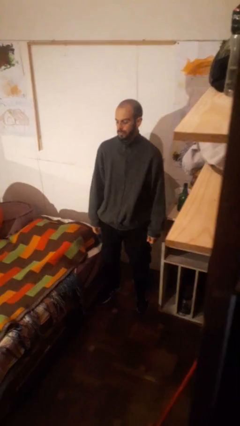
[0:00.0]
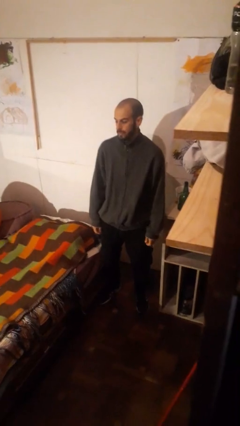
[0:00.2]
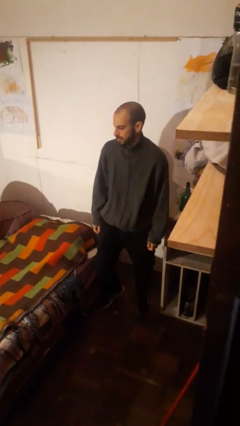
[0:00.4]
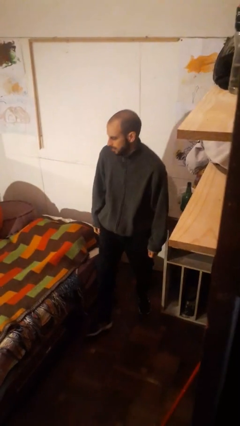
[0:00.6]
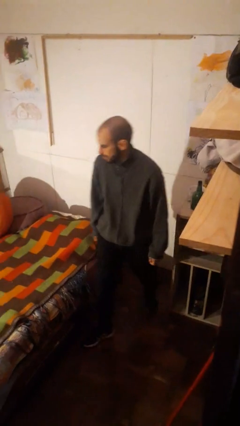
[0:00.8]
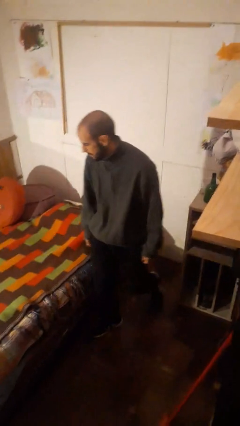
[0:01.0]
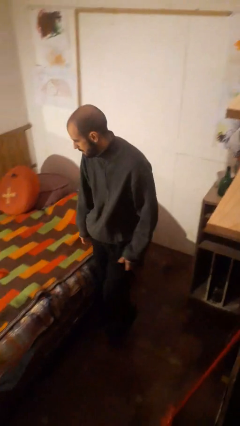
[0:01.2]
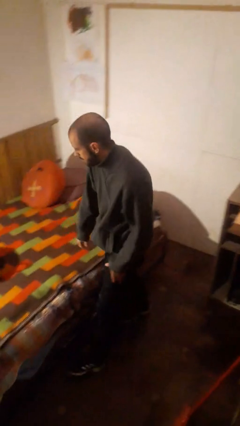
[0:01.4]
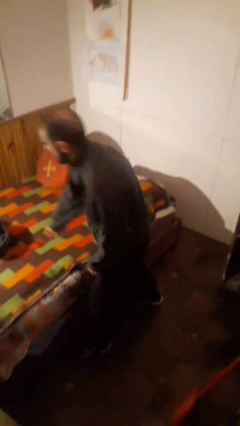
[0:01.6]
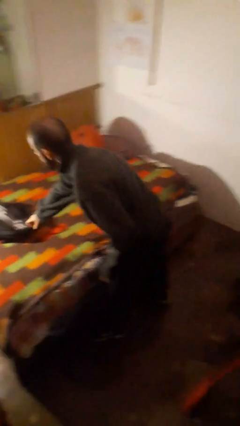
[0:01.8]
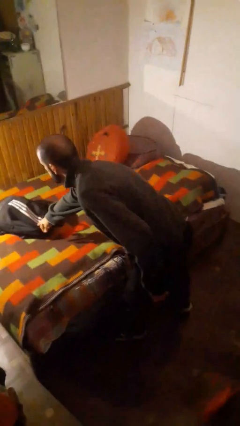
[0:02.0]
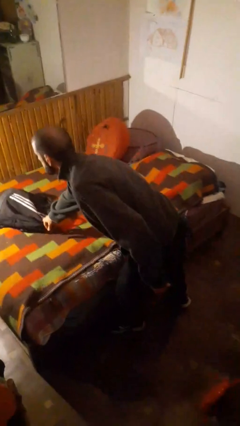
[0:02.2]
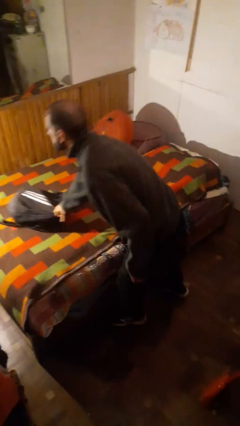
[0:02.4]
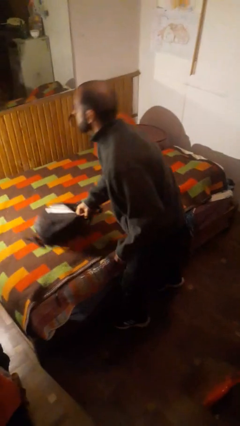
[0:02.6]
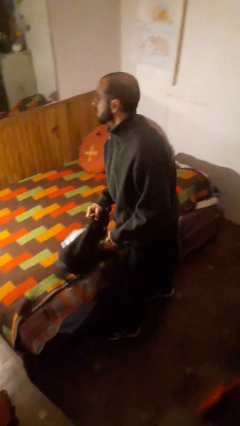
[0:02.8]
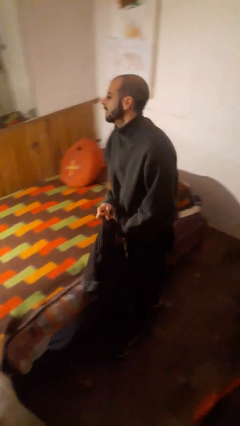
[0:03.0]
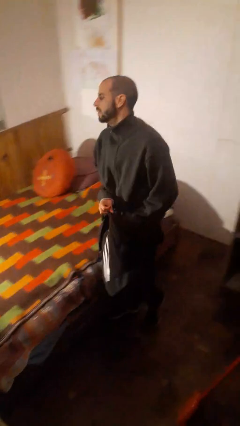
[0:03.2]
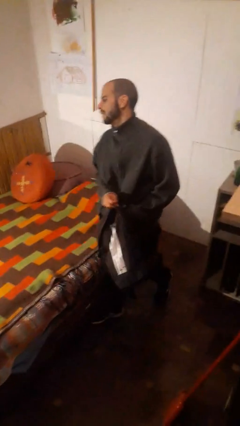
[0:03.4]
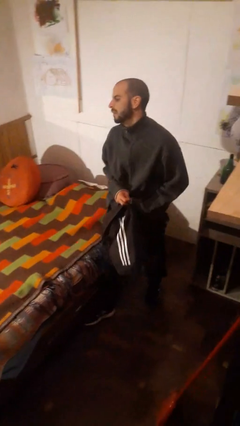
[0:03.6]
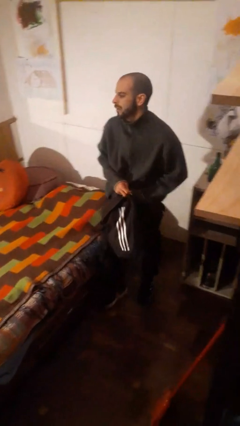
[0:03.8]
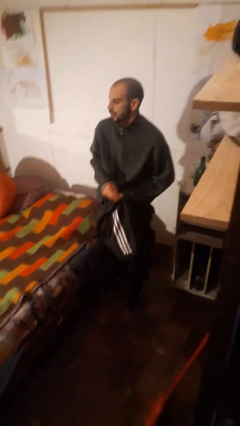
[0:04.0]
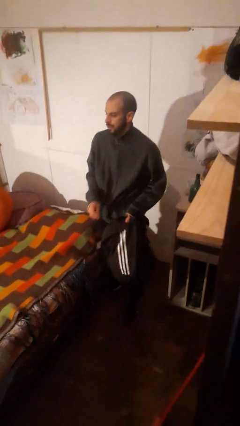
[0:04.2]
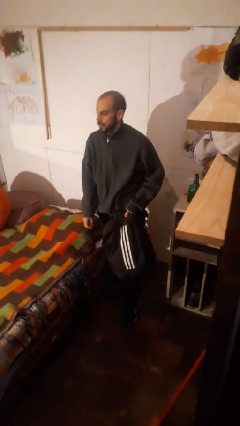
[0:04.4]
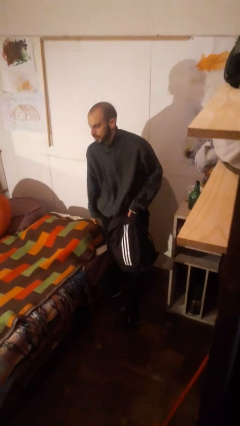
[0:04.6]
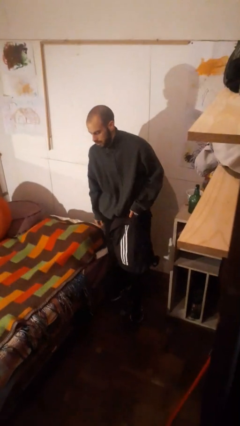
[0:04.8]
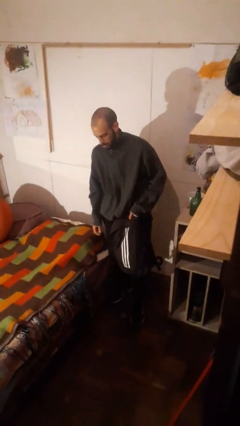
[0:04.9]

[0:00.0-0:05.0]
person picks up object from bed

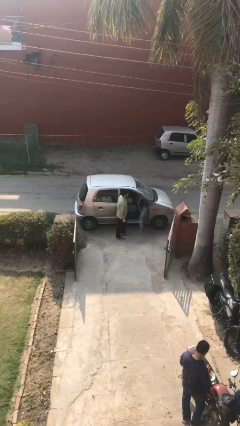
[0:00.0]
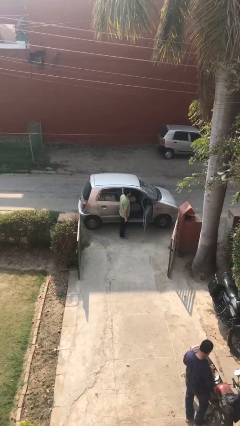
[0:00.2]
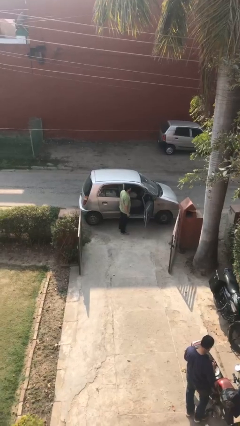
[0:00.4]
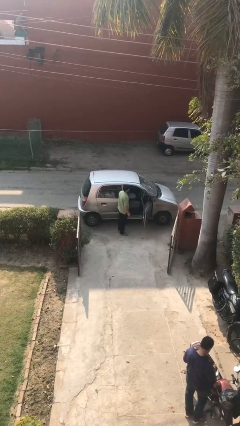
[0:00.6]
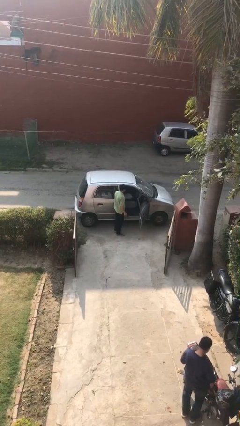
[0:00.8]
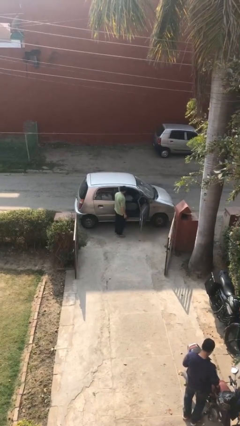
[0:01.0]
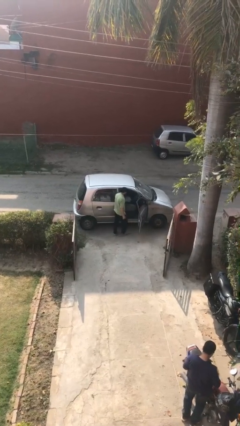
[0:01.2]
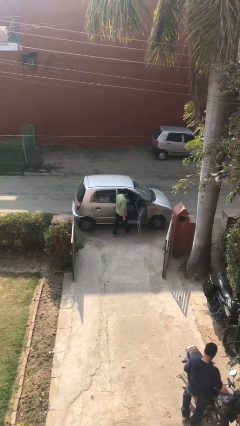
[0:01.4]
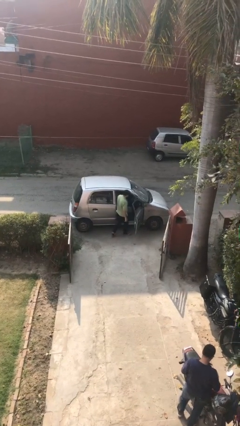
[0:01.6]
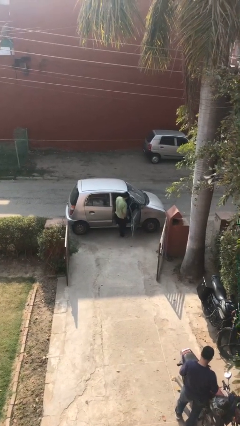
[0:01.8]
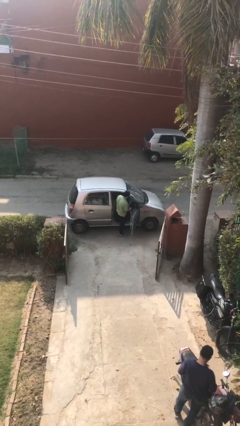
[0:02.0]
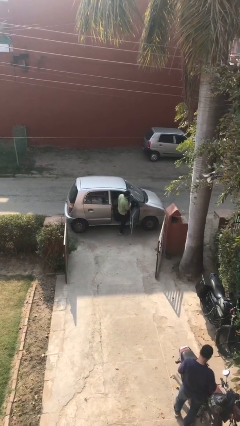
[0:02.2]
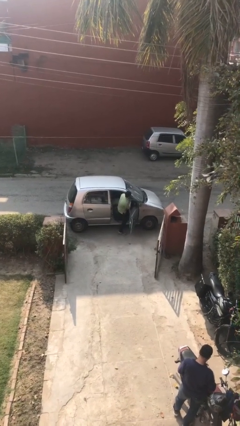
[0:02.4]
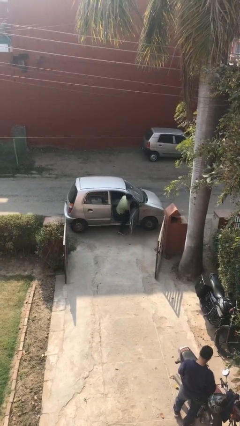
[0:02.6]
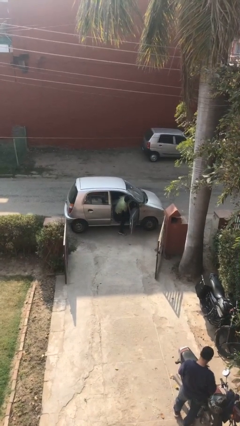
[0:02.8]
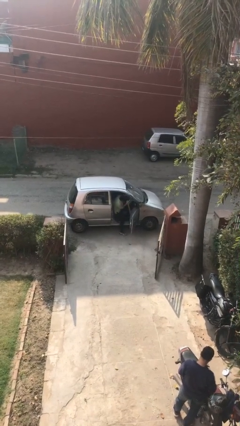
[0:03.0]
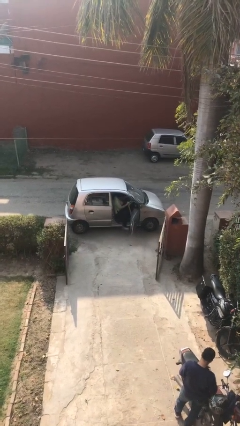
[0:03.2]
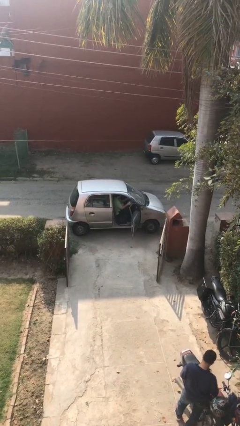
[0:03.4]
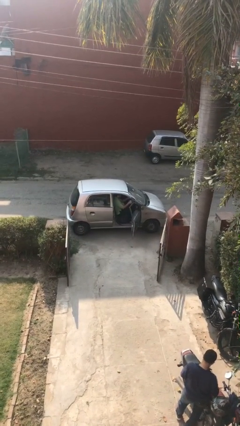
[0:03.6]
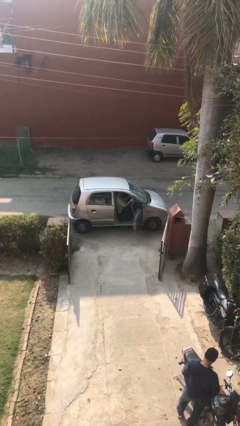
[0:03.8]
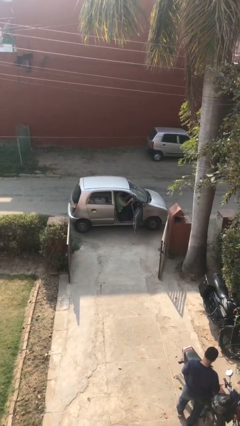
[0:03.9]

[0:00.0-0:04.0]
person enters car

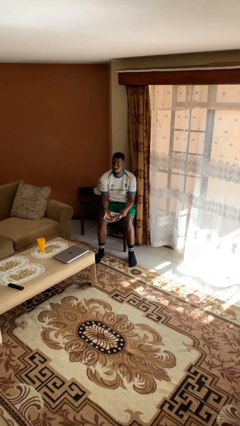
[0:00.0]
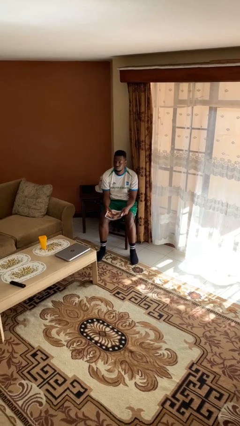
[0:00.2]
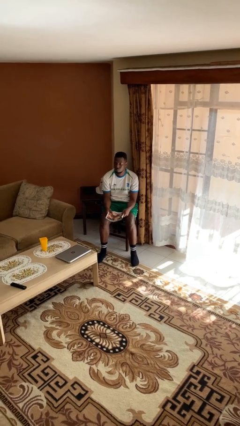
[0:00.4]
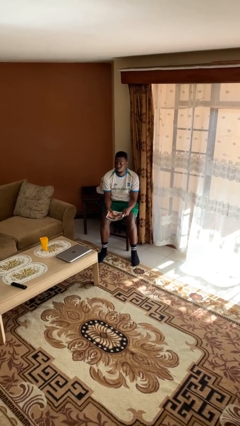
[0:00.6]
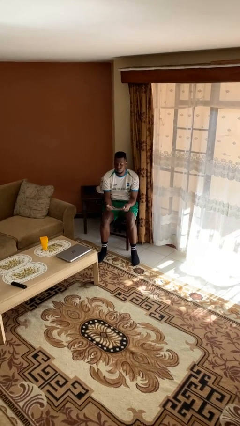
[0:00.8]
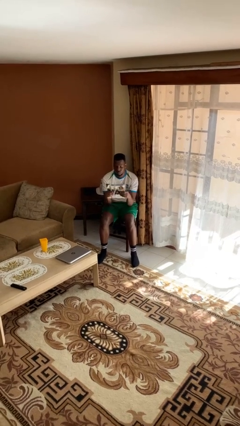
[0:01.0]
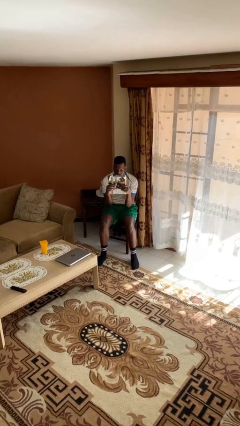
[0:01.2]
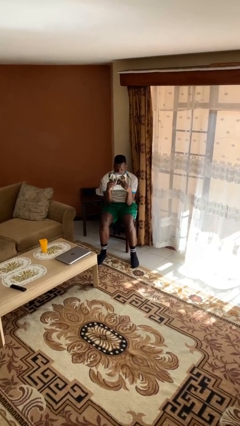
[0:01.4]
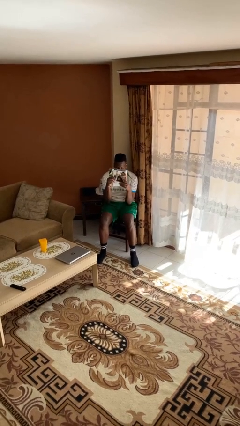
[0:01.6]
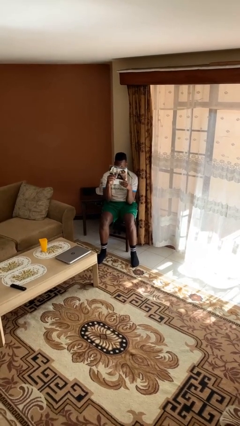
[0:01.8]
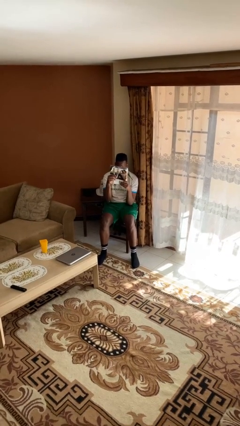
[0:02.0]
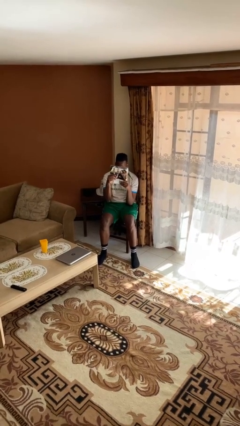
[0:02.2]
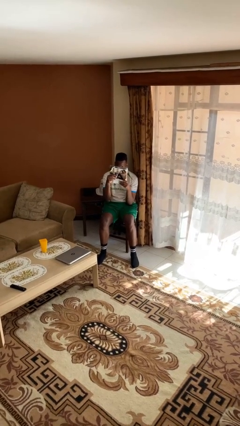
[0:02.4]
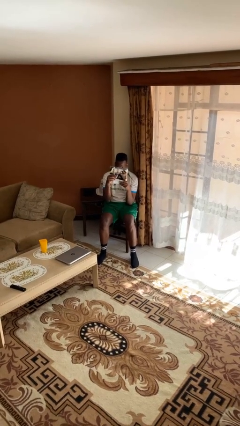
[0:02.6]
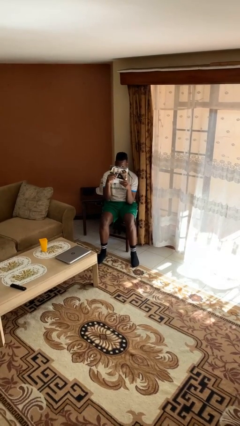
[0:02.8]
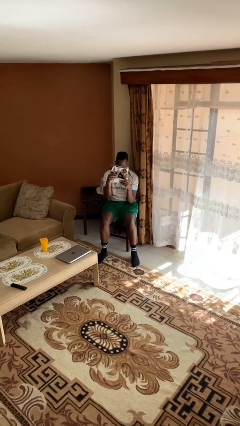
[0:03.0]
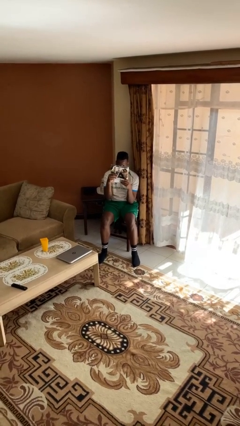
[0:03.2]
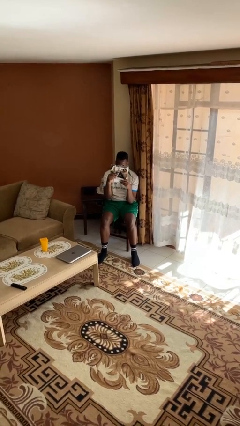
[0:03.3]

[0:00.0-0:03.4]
person reads document

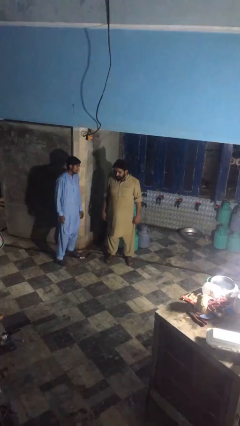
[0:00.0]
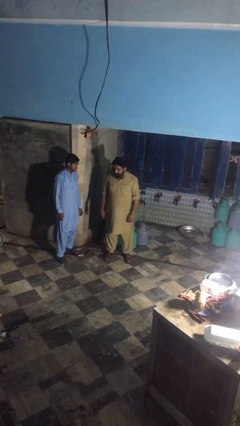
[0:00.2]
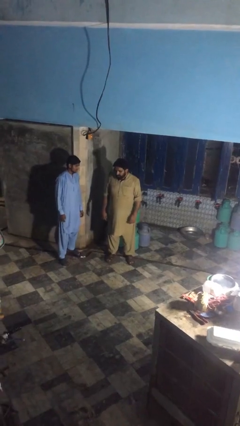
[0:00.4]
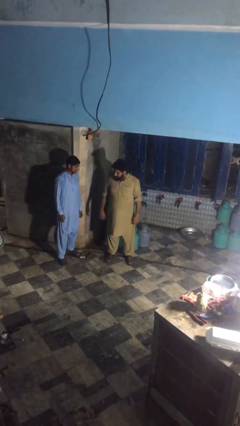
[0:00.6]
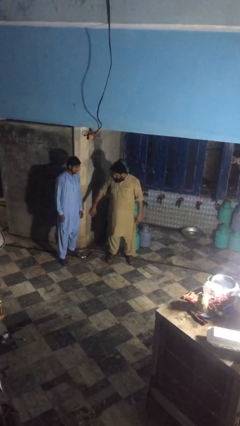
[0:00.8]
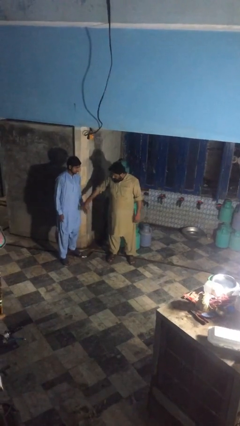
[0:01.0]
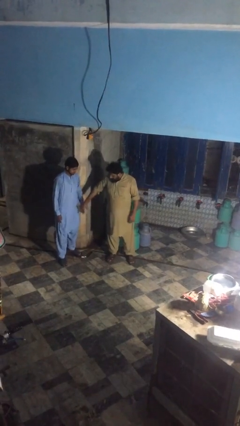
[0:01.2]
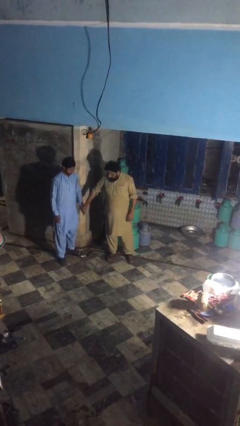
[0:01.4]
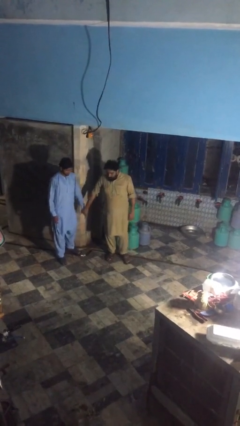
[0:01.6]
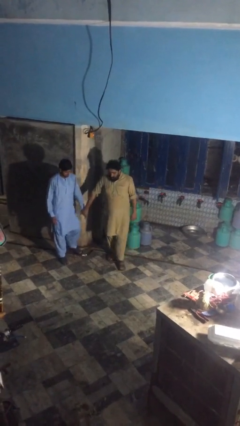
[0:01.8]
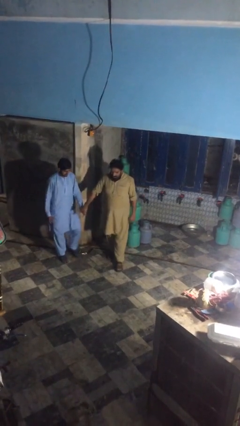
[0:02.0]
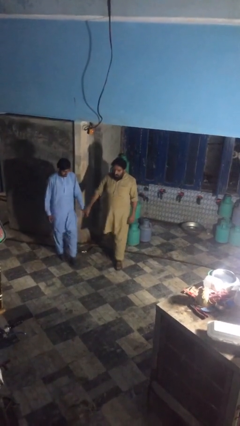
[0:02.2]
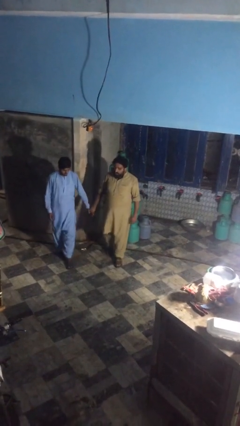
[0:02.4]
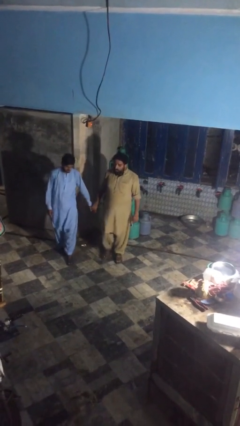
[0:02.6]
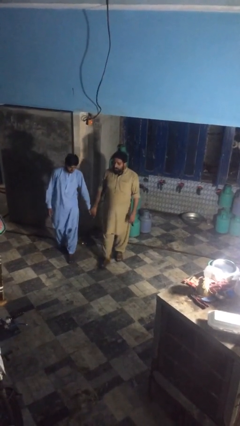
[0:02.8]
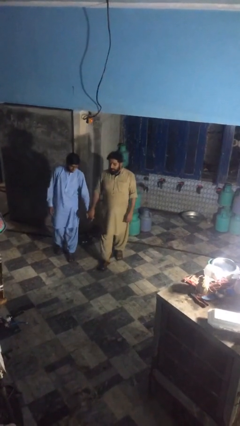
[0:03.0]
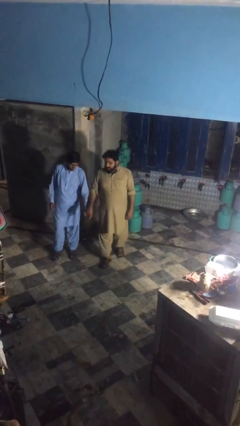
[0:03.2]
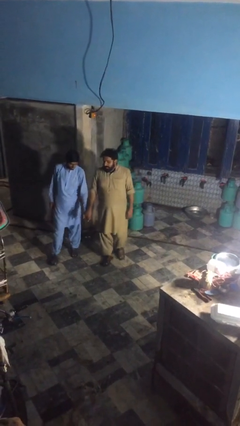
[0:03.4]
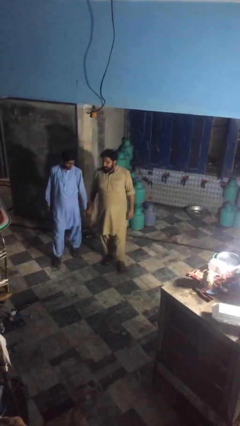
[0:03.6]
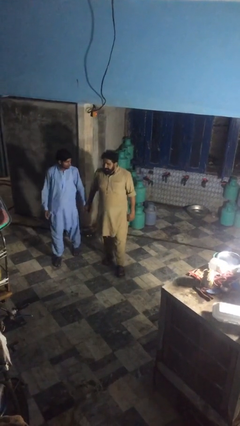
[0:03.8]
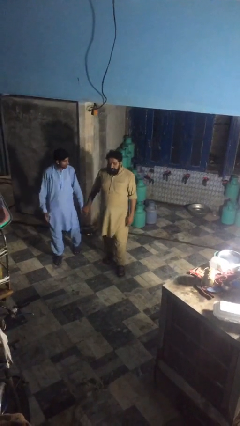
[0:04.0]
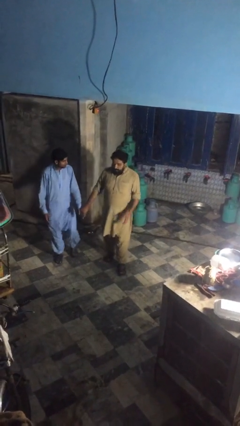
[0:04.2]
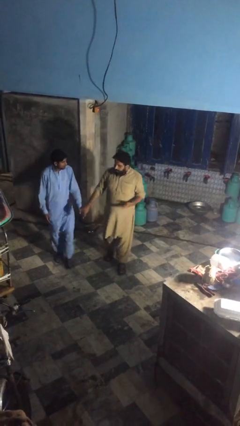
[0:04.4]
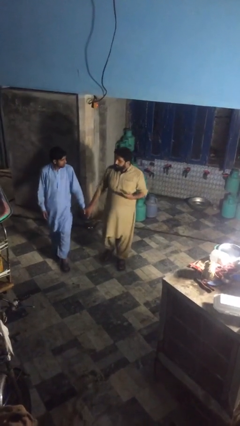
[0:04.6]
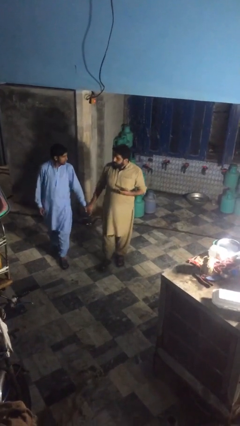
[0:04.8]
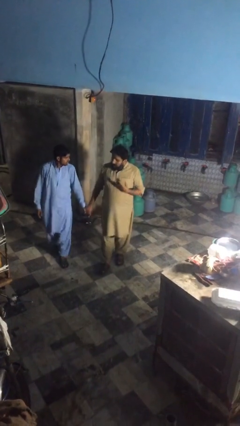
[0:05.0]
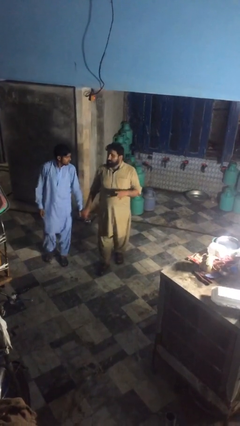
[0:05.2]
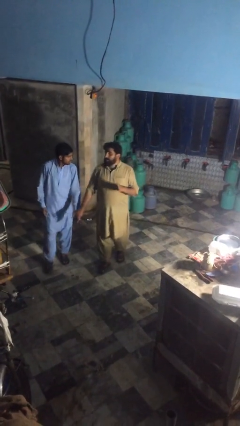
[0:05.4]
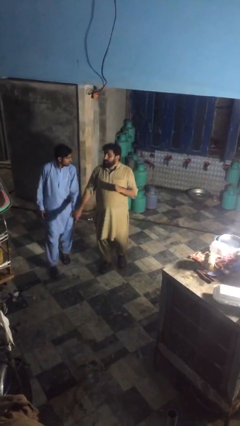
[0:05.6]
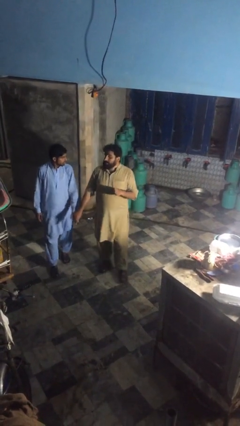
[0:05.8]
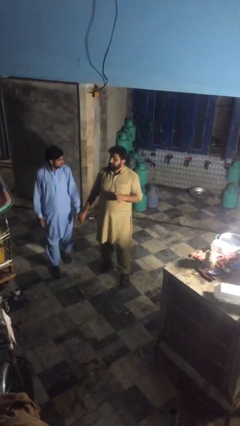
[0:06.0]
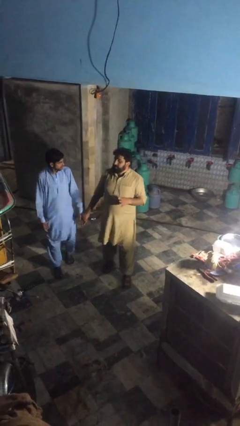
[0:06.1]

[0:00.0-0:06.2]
person holds hand
